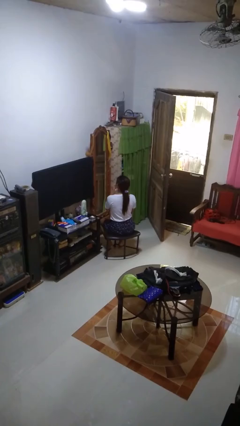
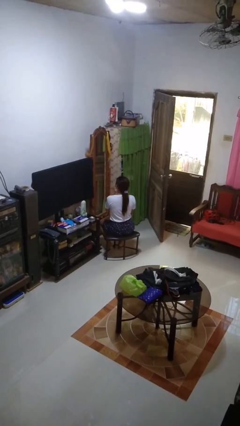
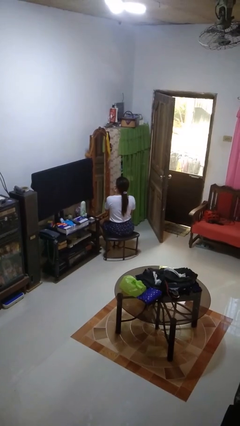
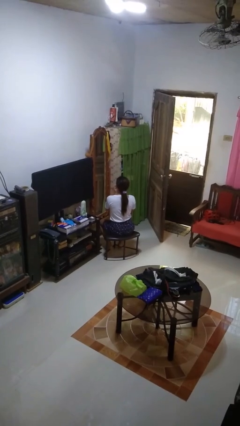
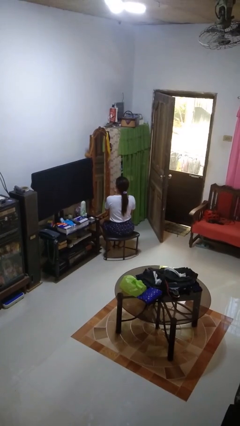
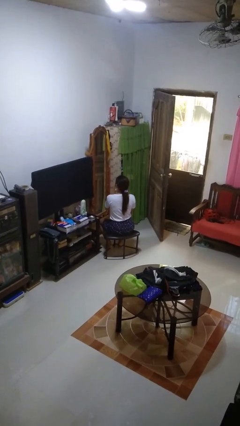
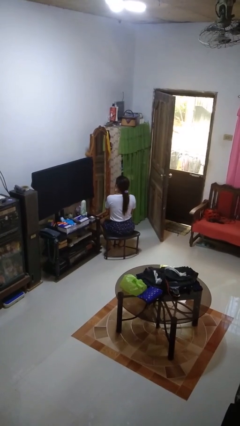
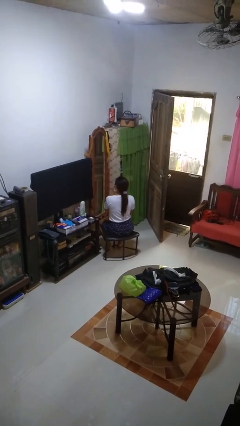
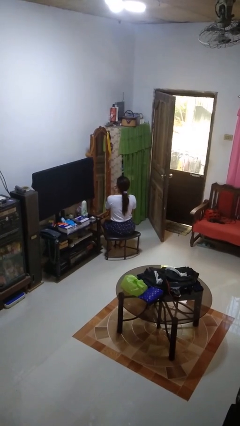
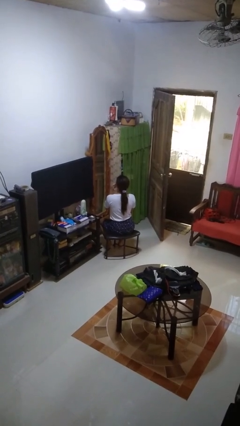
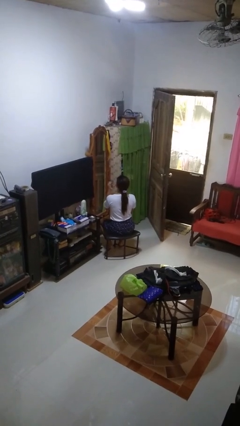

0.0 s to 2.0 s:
person applies lip makeup

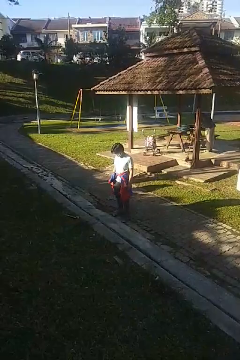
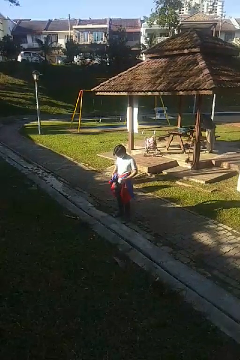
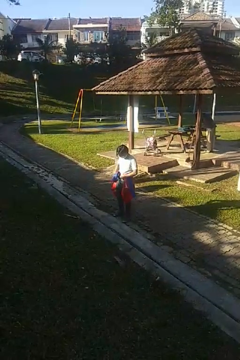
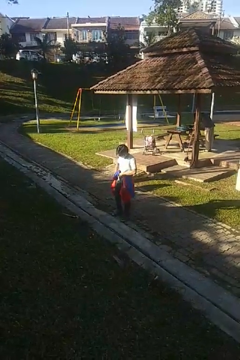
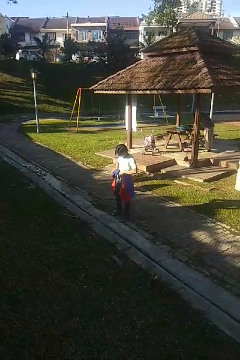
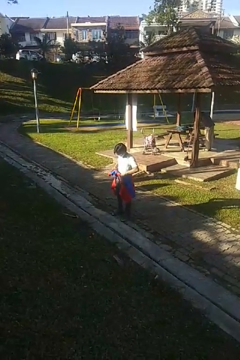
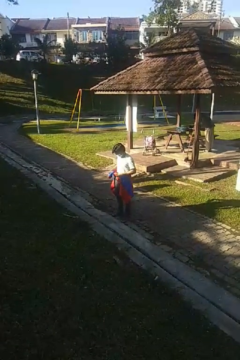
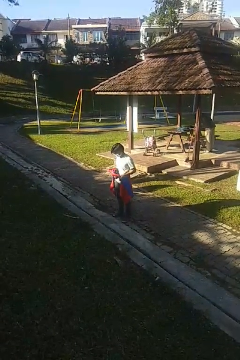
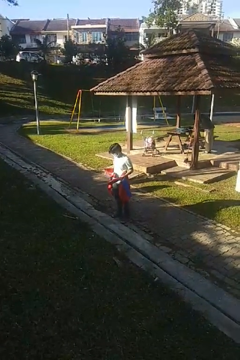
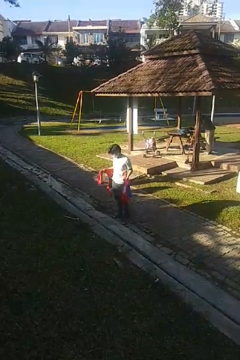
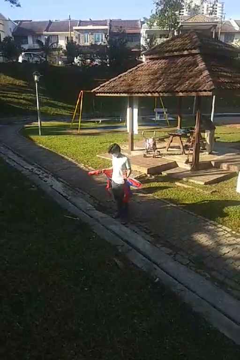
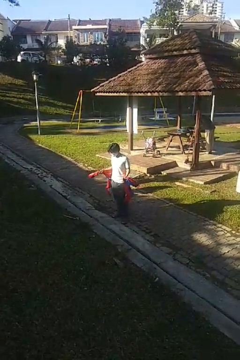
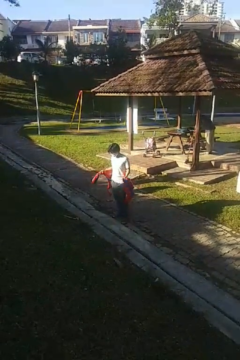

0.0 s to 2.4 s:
person unties jacket around waist

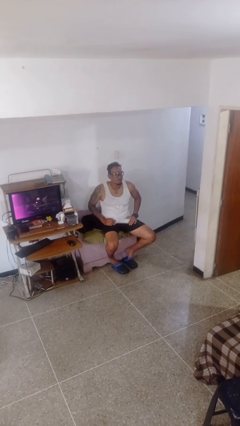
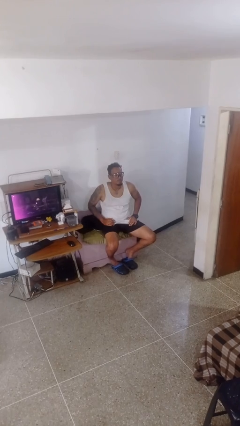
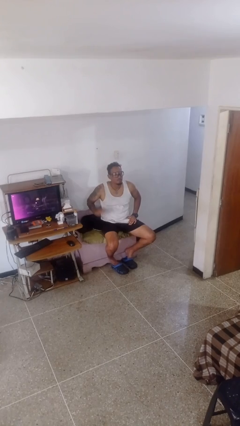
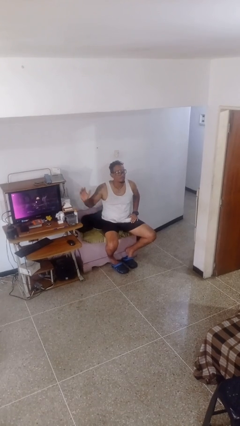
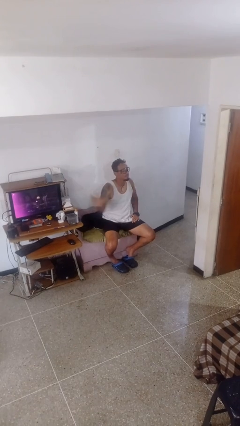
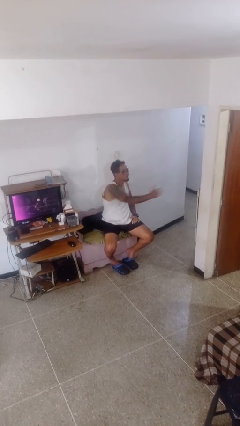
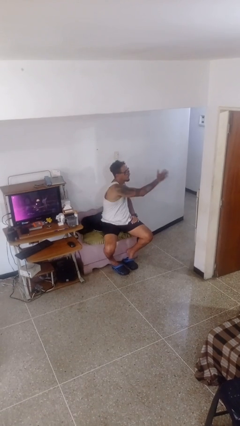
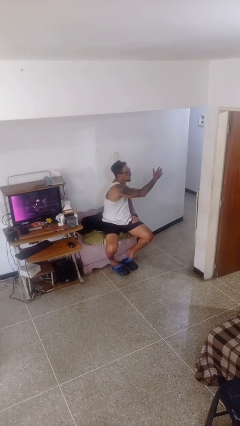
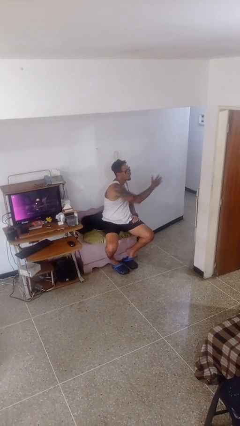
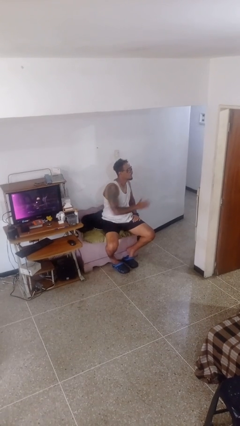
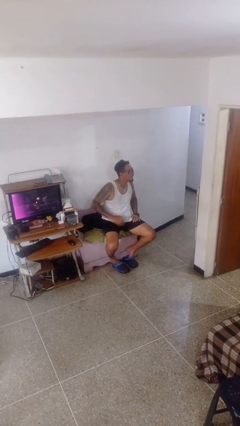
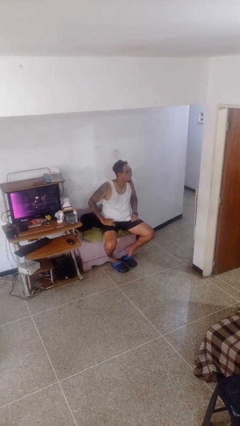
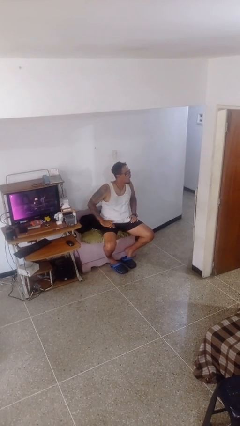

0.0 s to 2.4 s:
person gestures swipe left

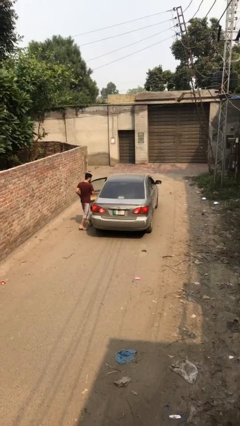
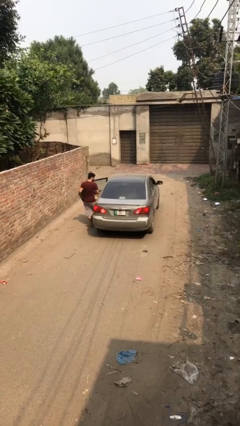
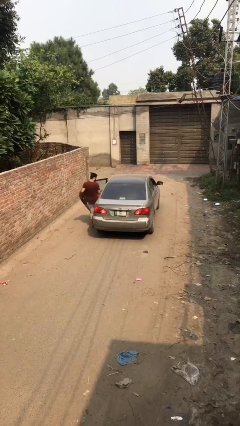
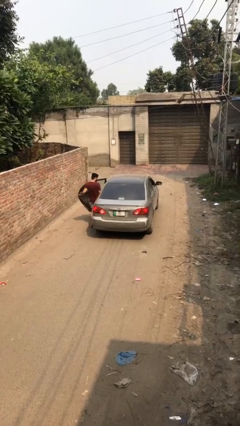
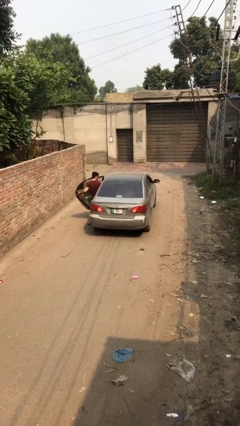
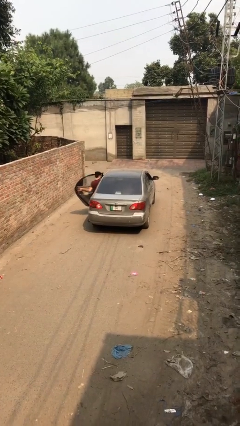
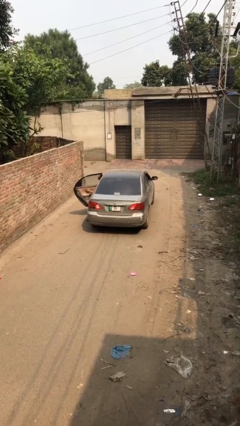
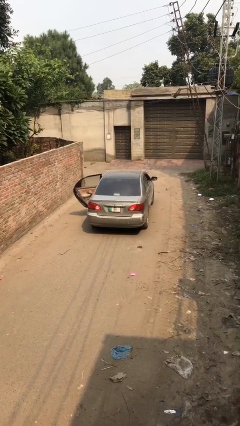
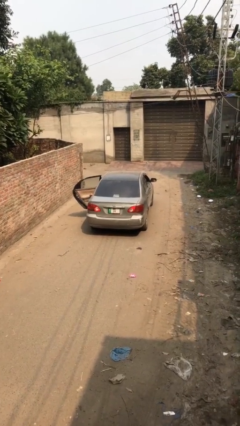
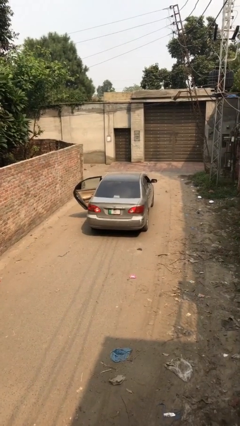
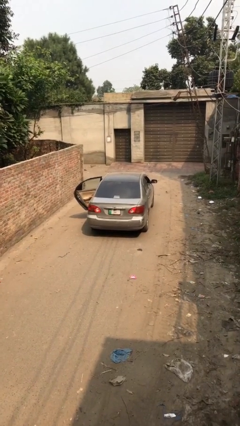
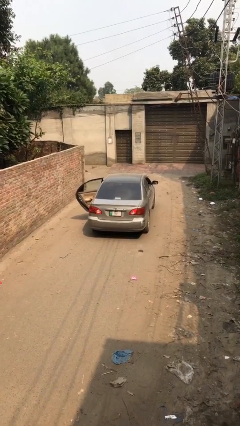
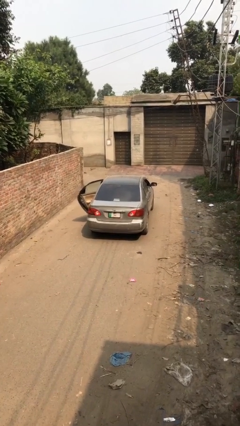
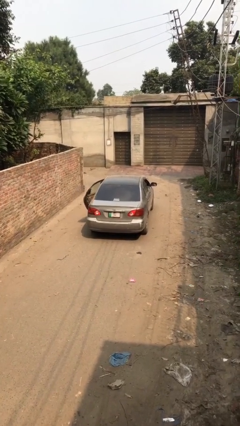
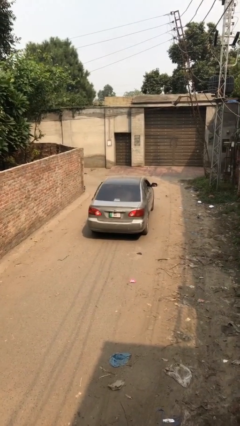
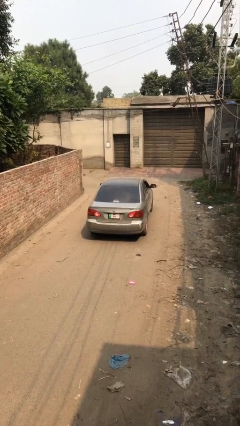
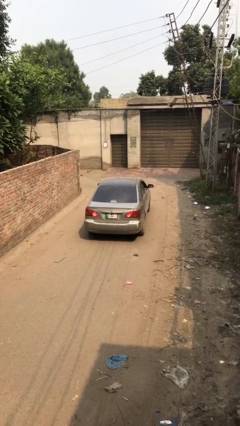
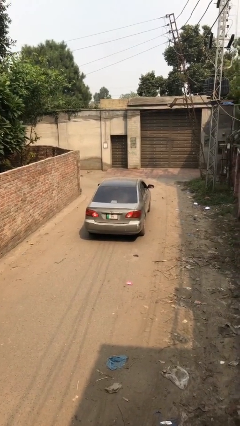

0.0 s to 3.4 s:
car picks up person

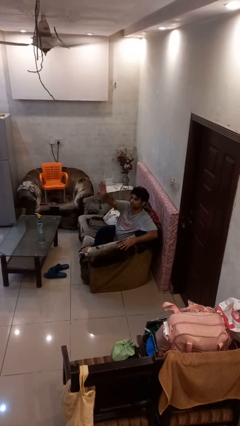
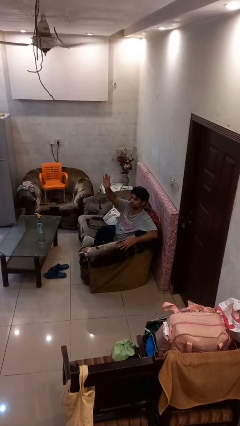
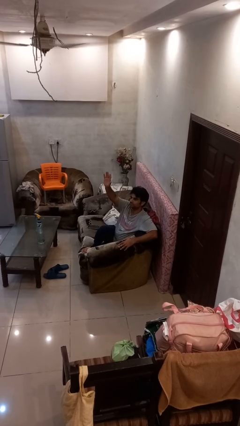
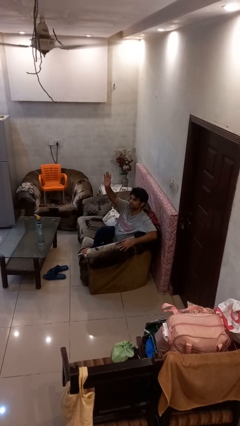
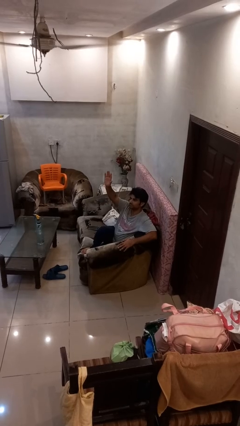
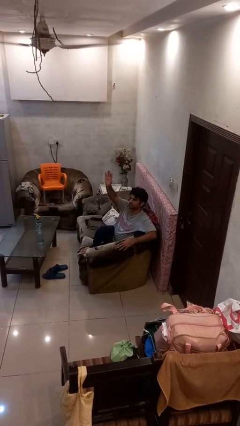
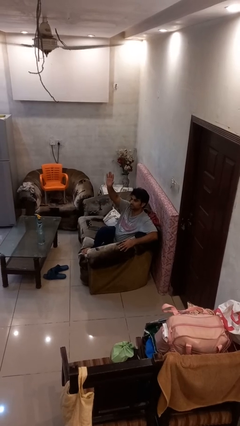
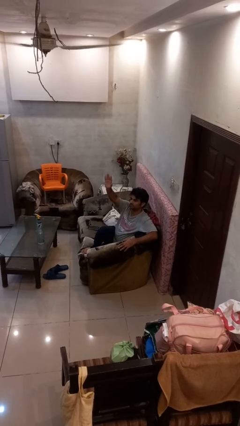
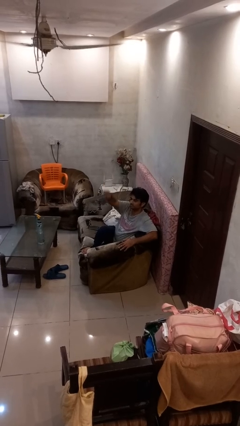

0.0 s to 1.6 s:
person gestures raise hand

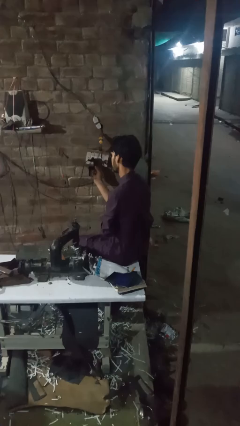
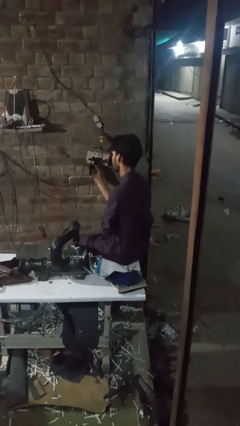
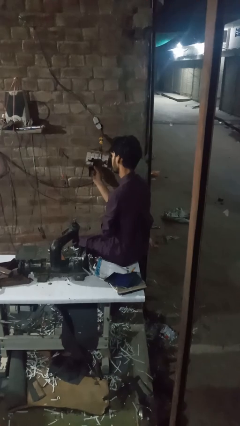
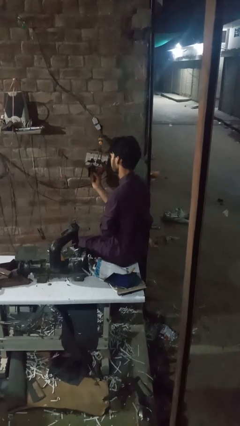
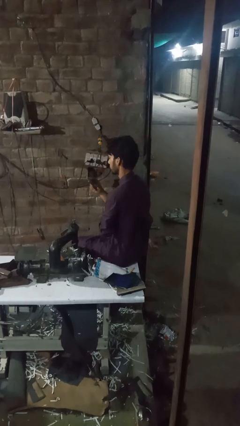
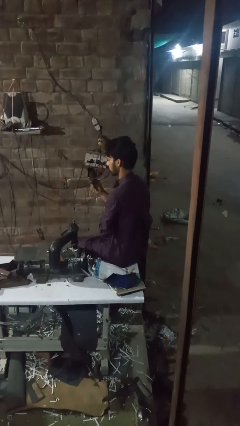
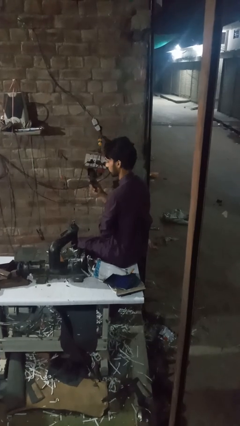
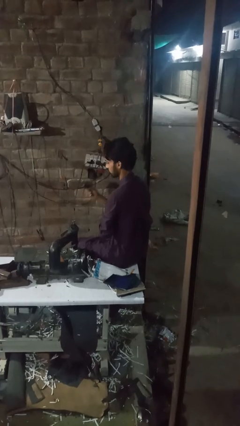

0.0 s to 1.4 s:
person unplugs from electrical socket

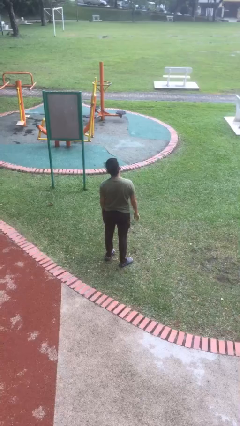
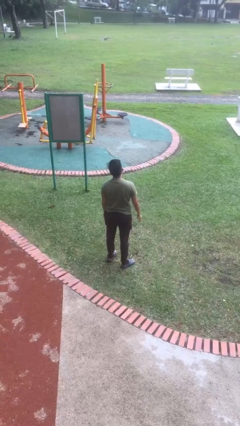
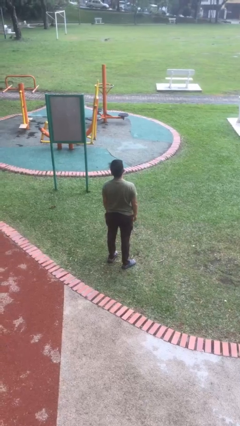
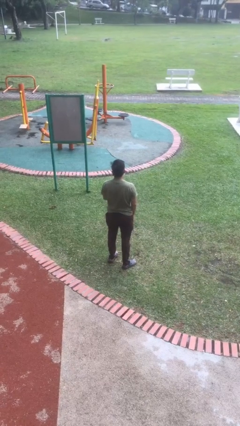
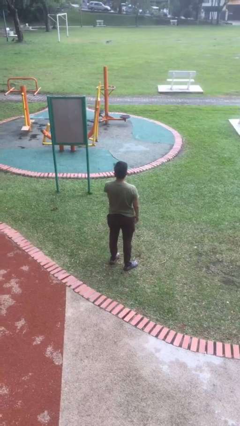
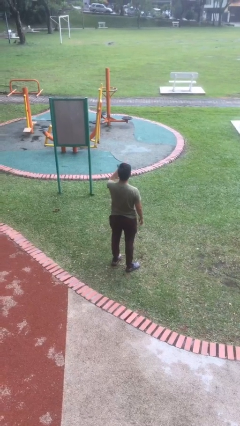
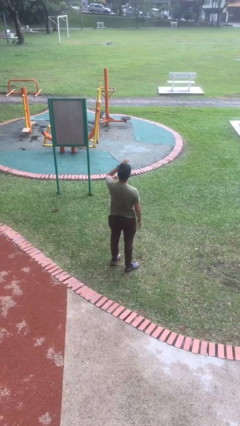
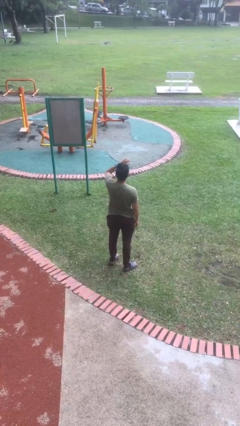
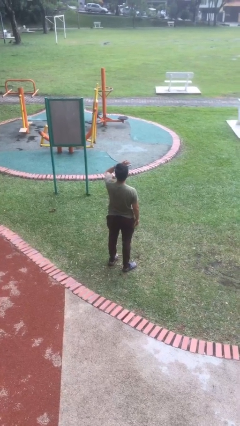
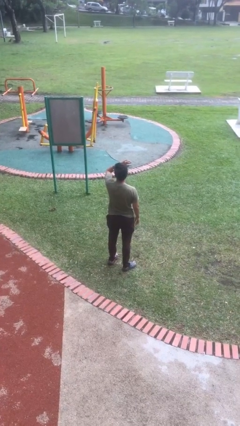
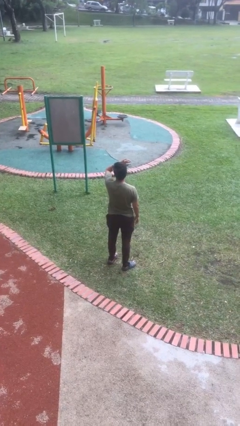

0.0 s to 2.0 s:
person shades eyes

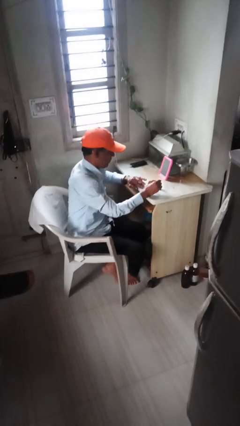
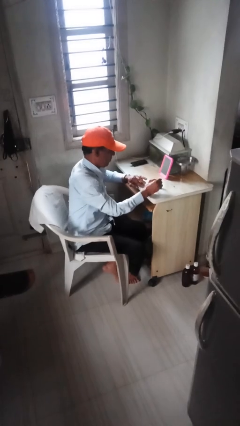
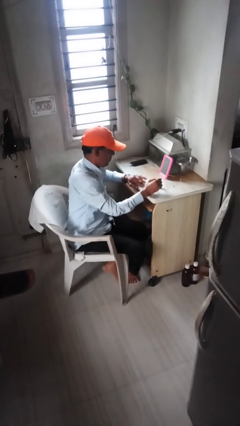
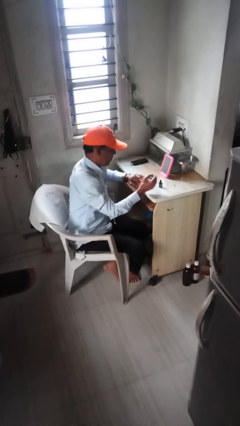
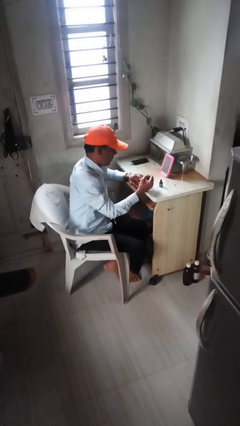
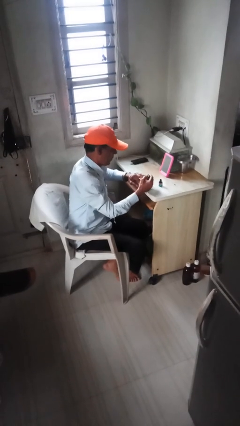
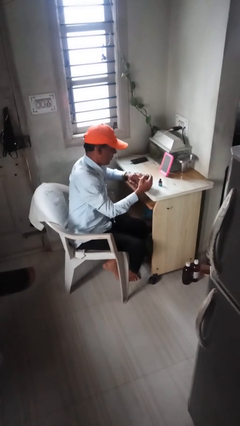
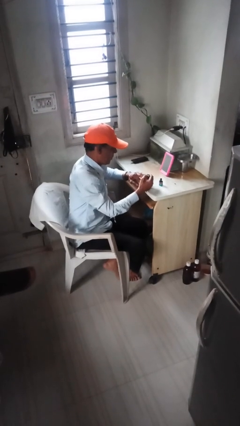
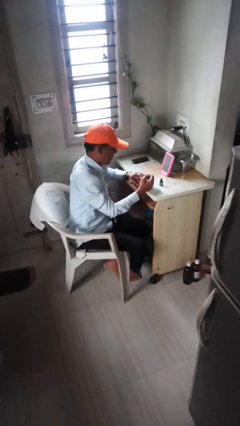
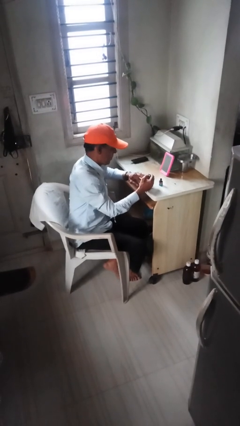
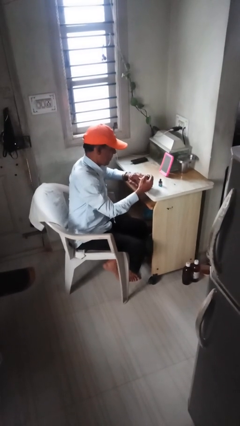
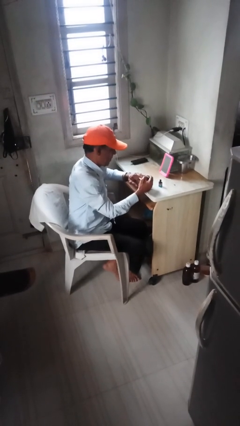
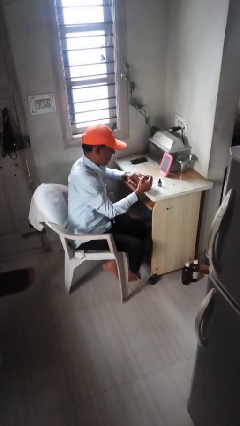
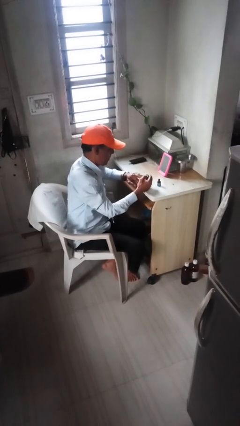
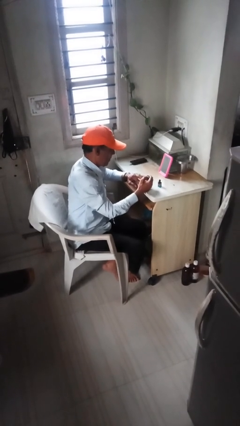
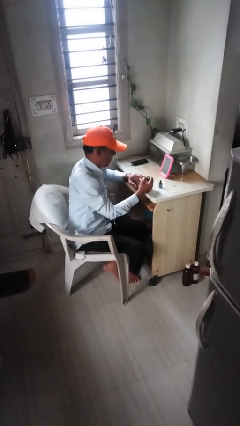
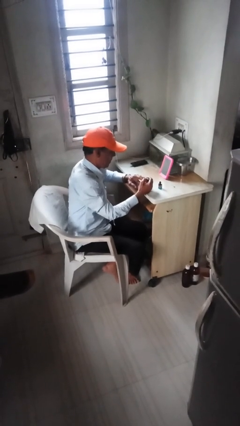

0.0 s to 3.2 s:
person paints fingernails
